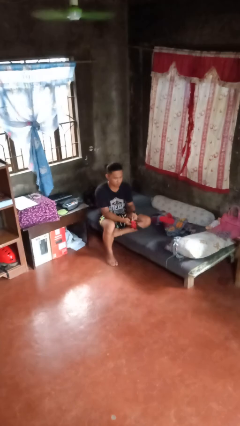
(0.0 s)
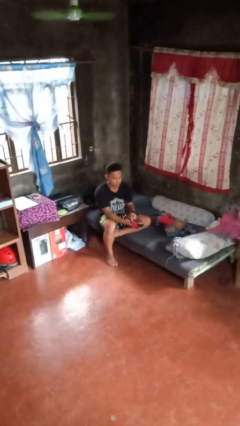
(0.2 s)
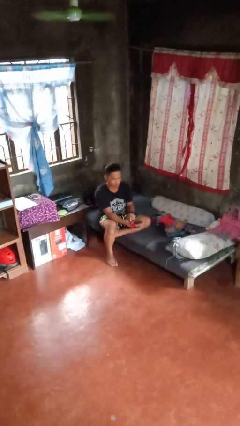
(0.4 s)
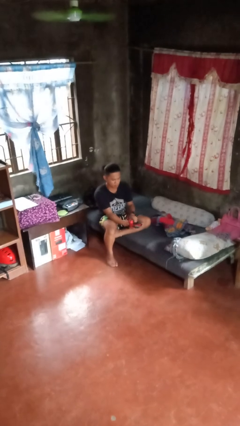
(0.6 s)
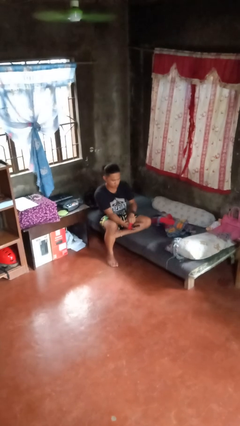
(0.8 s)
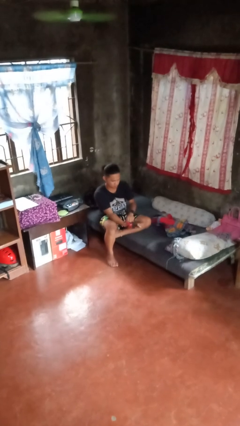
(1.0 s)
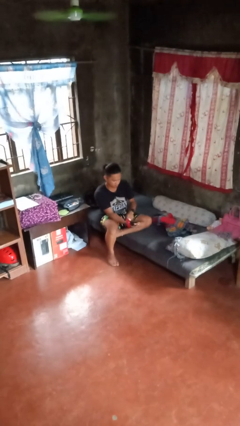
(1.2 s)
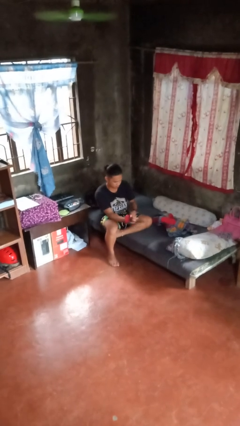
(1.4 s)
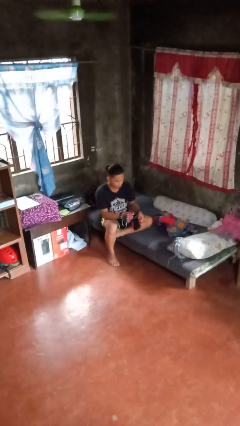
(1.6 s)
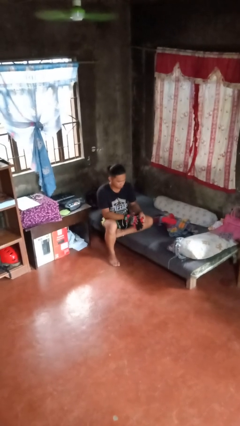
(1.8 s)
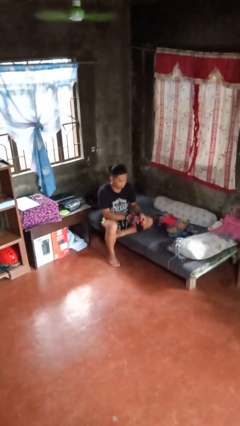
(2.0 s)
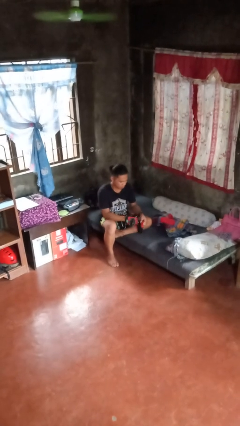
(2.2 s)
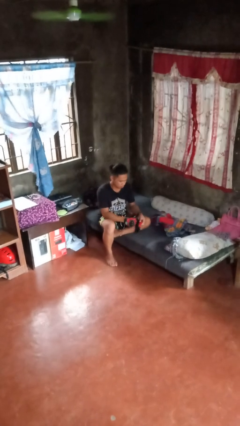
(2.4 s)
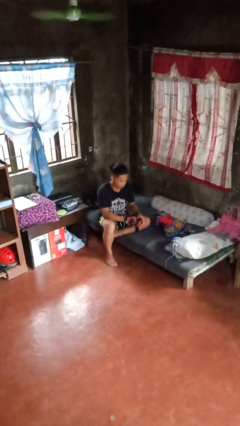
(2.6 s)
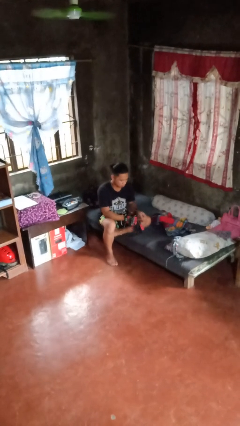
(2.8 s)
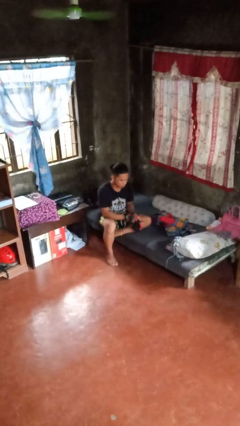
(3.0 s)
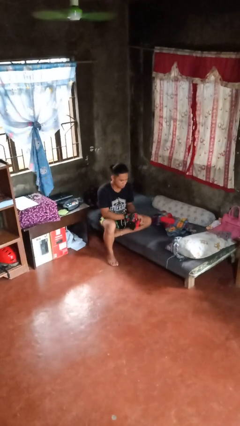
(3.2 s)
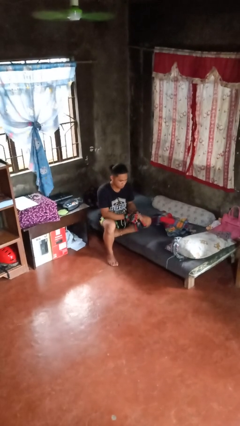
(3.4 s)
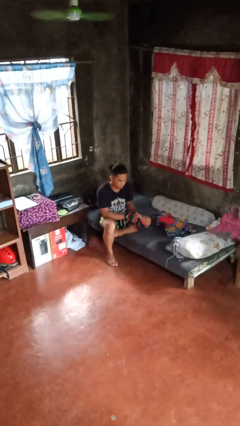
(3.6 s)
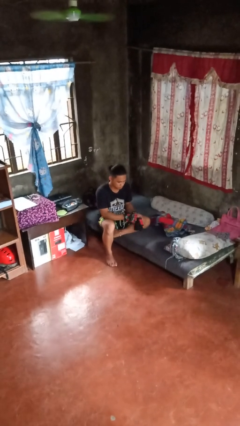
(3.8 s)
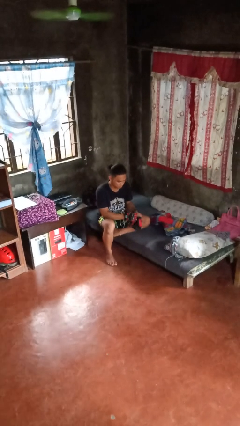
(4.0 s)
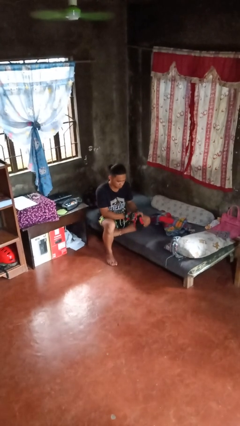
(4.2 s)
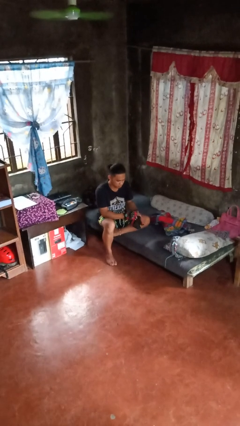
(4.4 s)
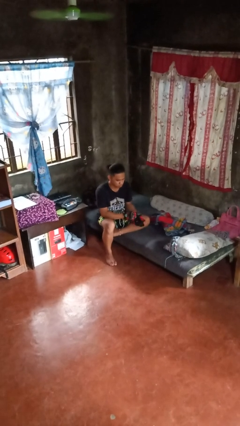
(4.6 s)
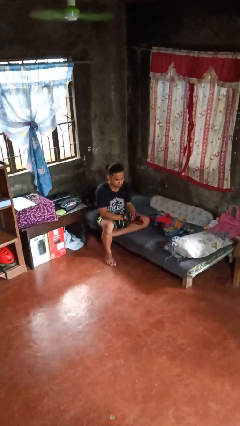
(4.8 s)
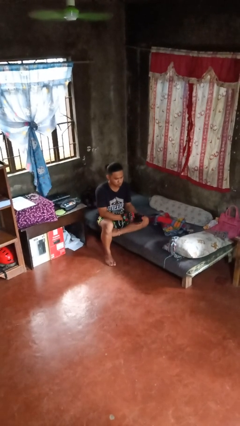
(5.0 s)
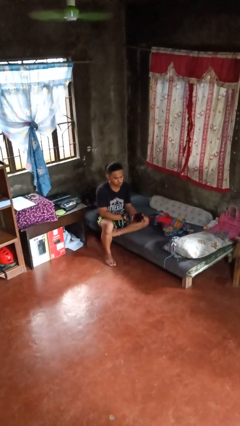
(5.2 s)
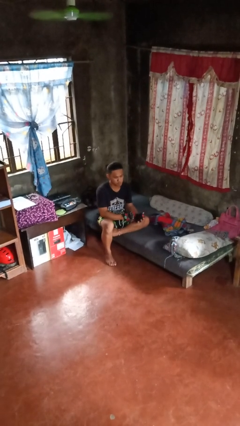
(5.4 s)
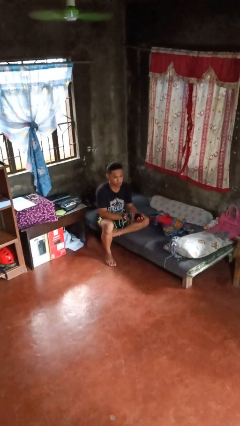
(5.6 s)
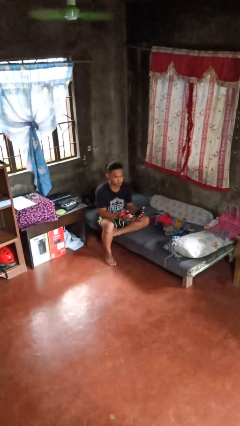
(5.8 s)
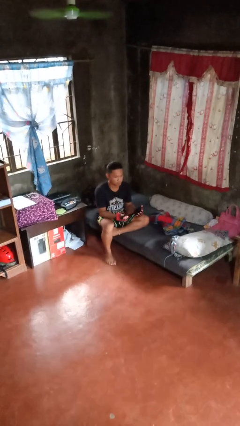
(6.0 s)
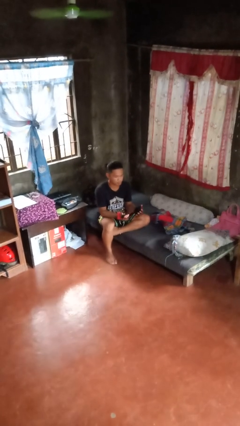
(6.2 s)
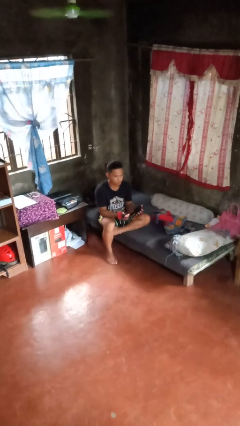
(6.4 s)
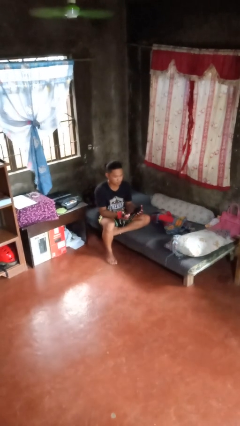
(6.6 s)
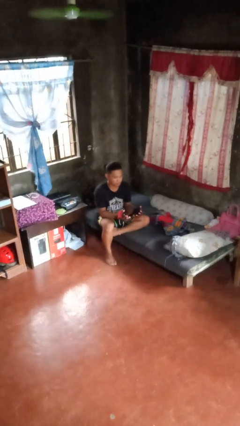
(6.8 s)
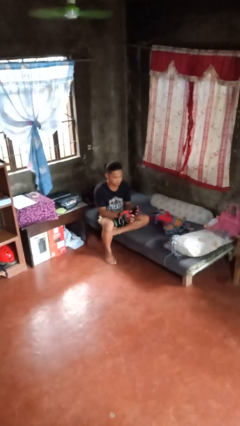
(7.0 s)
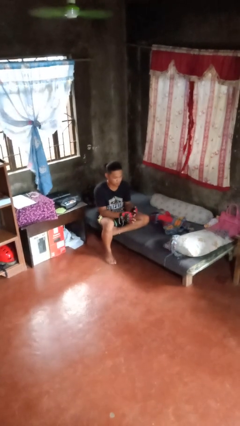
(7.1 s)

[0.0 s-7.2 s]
person puts on gloves

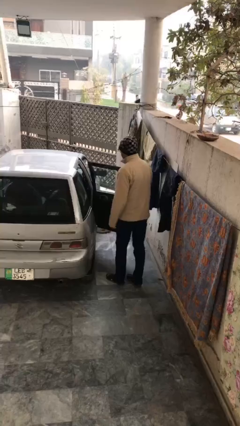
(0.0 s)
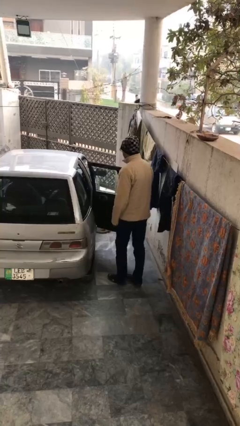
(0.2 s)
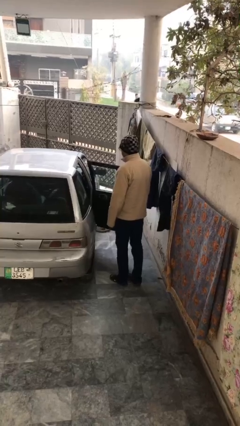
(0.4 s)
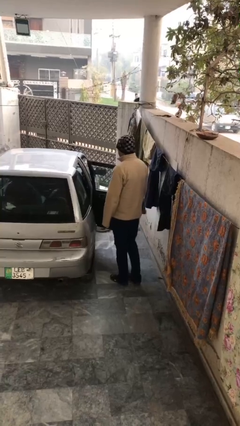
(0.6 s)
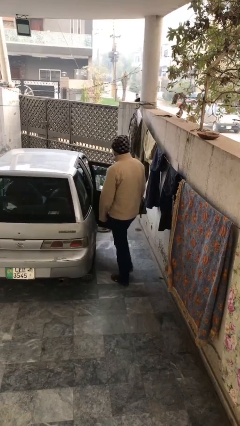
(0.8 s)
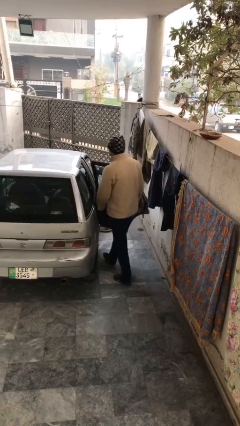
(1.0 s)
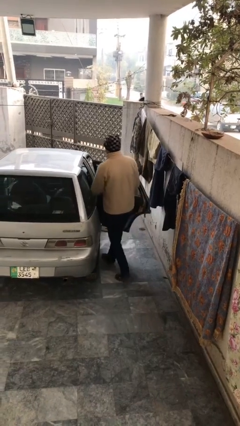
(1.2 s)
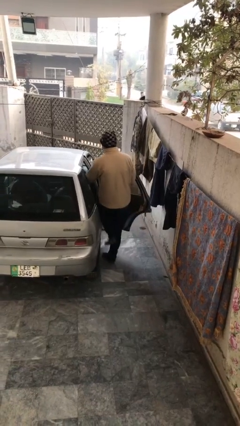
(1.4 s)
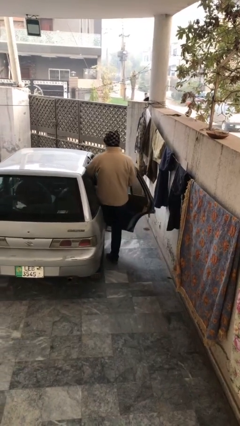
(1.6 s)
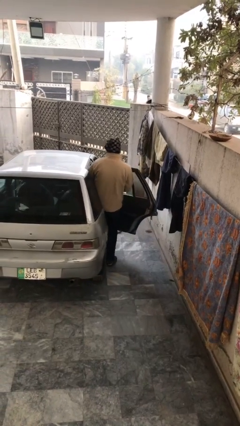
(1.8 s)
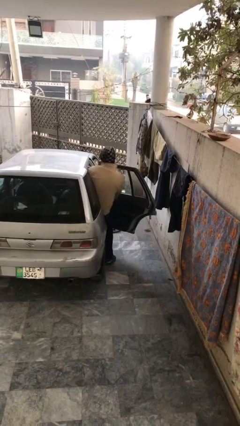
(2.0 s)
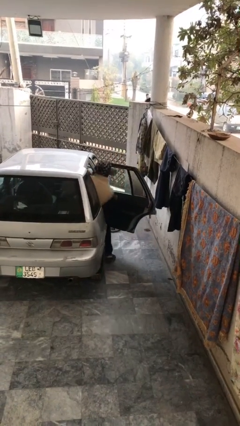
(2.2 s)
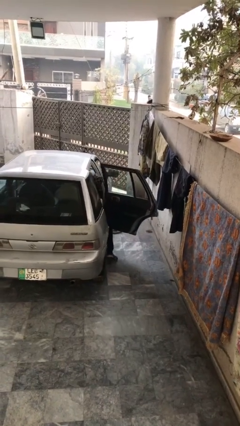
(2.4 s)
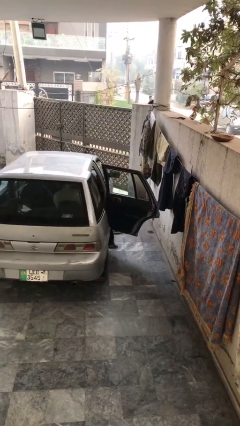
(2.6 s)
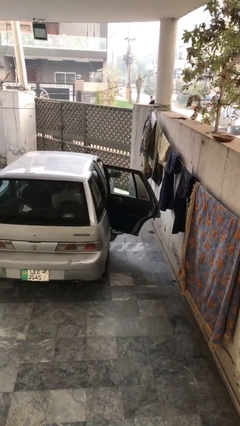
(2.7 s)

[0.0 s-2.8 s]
person enters car

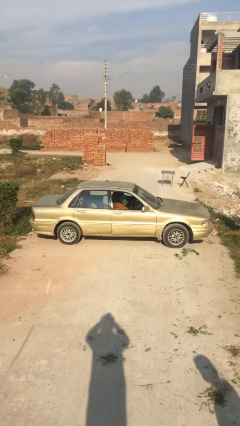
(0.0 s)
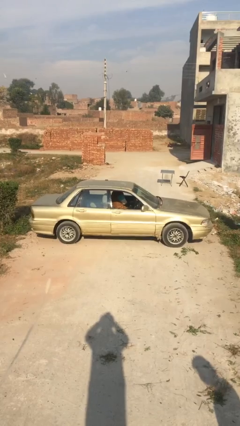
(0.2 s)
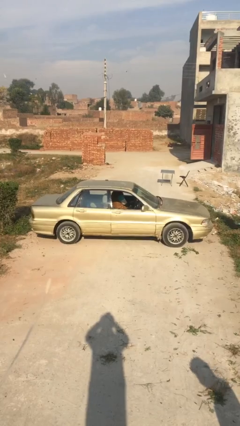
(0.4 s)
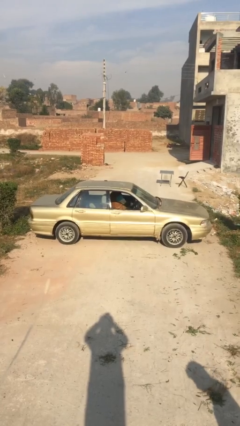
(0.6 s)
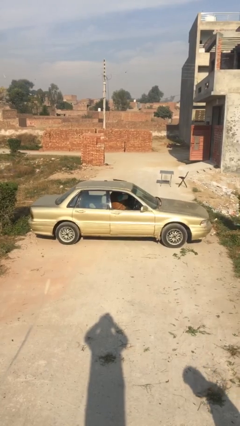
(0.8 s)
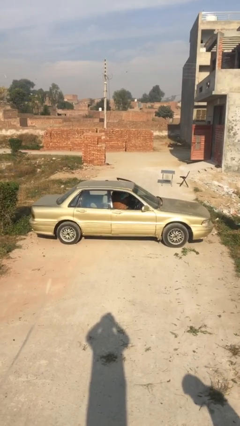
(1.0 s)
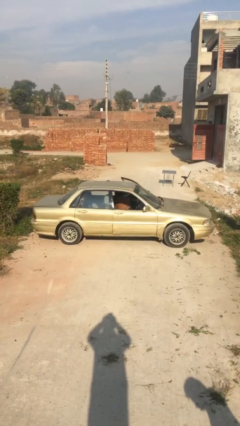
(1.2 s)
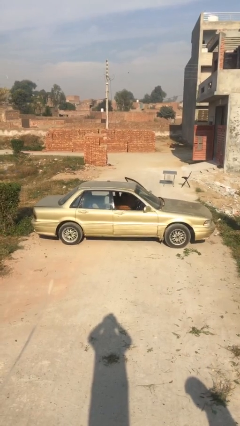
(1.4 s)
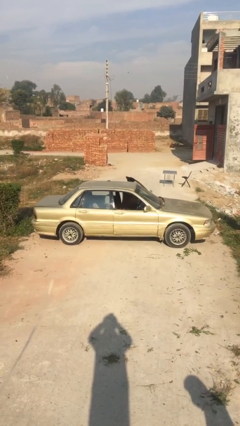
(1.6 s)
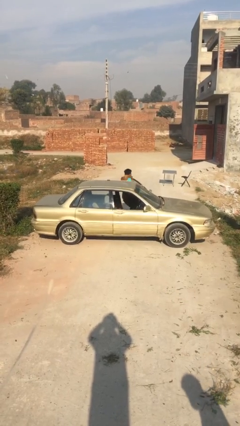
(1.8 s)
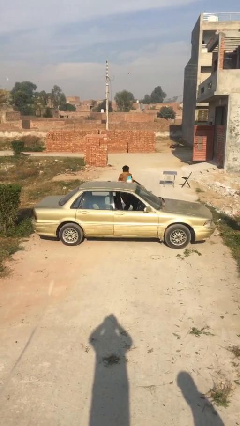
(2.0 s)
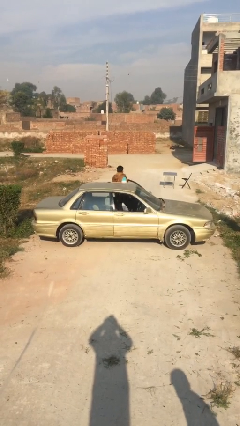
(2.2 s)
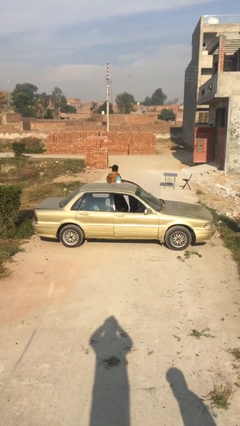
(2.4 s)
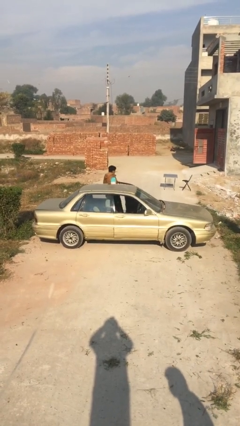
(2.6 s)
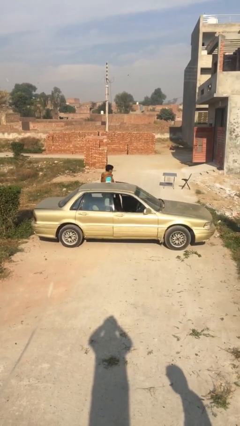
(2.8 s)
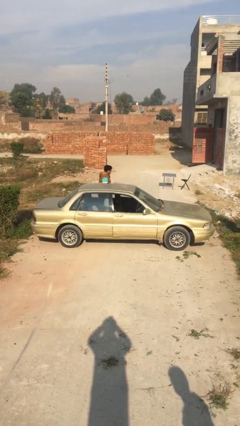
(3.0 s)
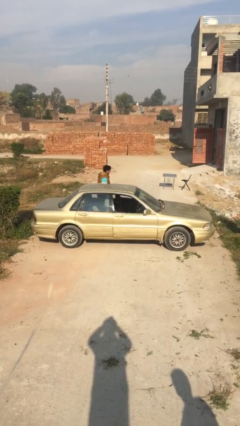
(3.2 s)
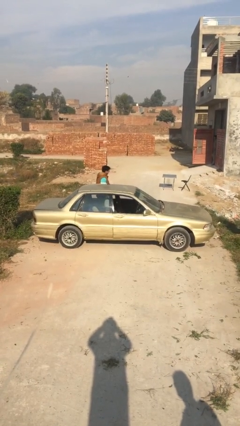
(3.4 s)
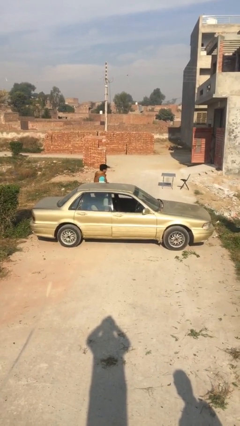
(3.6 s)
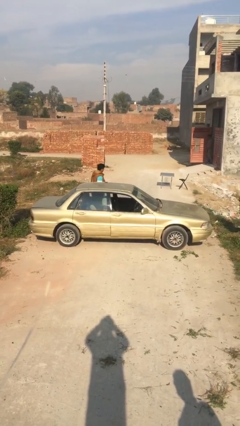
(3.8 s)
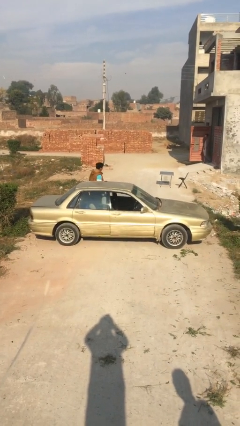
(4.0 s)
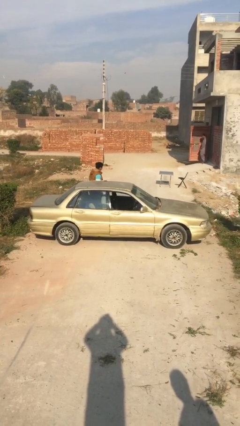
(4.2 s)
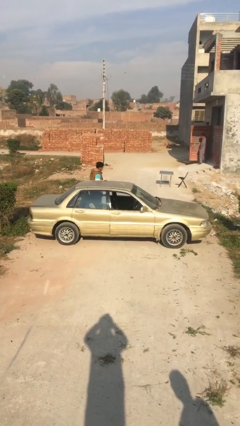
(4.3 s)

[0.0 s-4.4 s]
car drops off person

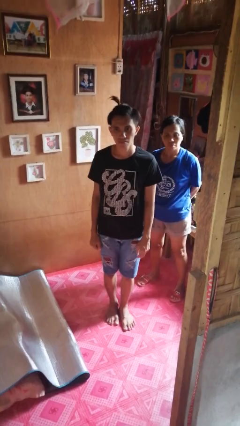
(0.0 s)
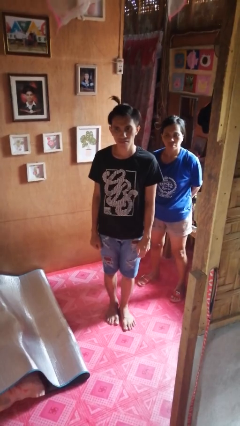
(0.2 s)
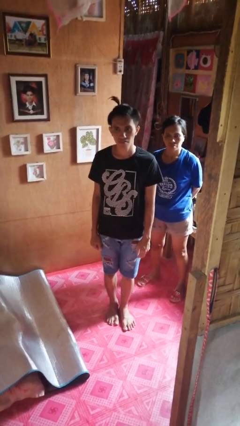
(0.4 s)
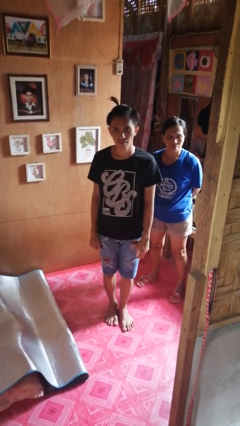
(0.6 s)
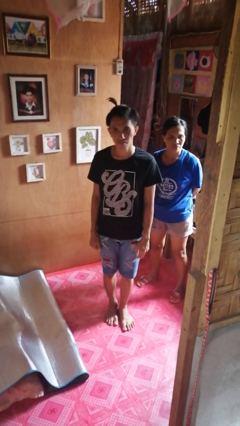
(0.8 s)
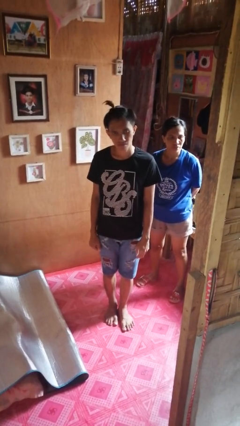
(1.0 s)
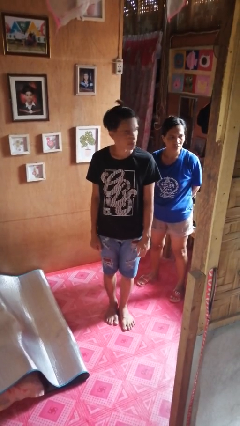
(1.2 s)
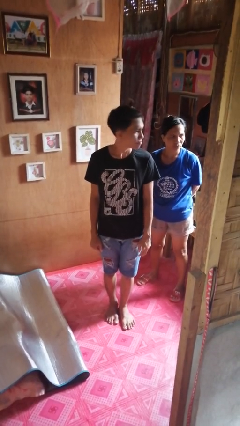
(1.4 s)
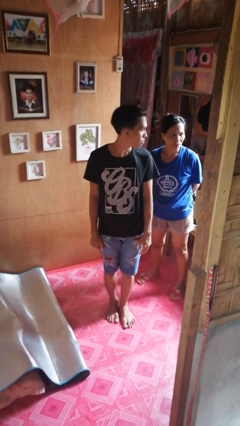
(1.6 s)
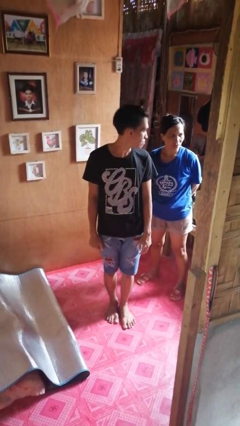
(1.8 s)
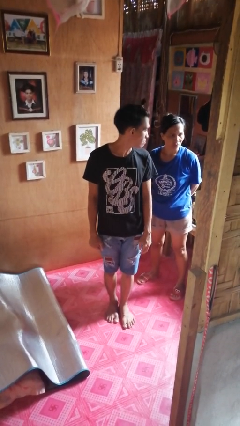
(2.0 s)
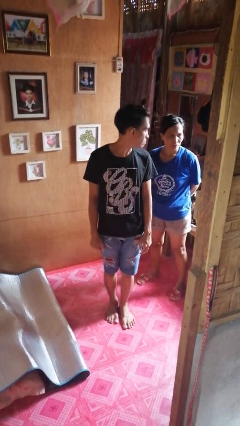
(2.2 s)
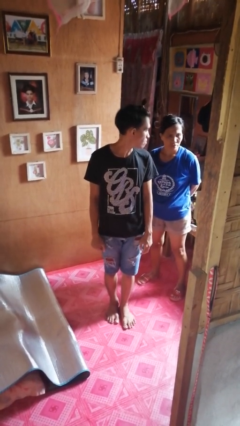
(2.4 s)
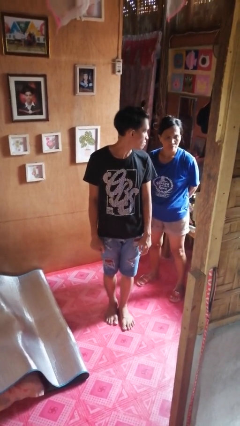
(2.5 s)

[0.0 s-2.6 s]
person looks over shoulder

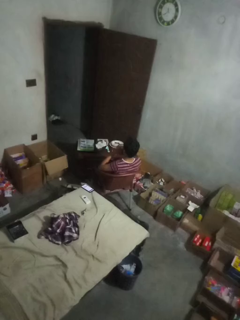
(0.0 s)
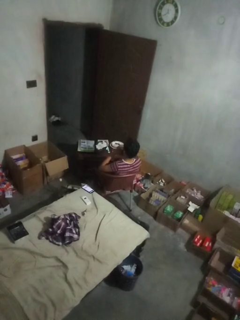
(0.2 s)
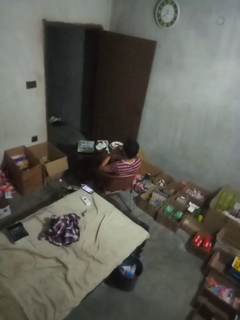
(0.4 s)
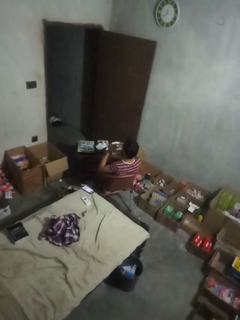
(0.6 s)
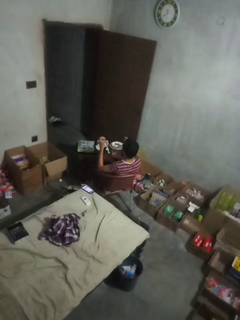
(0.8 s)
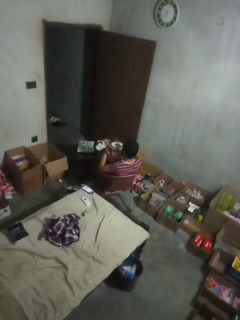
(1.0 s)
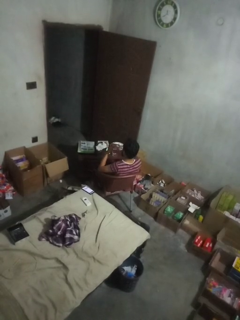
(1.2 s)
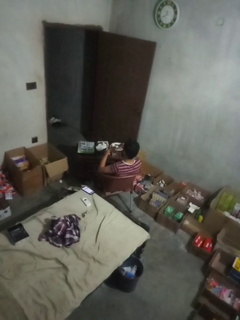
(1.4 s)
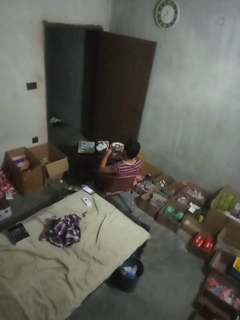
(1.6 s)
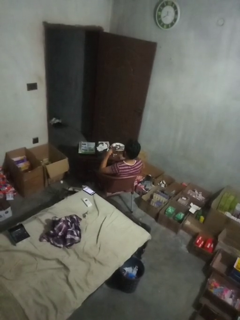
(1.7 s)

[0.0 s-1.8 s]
person claps hands
